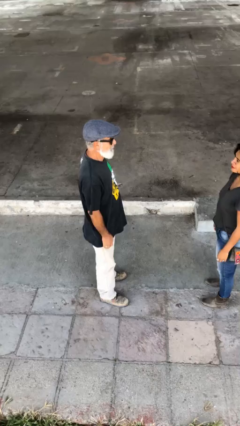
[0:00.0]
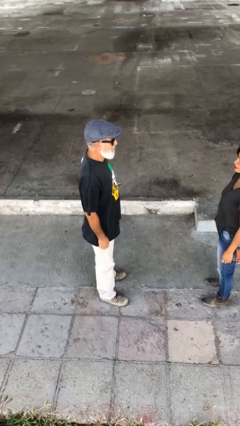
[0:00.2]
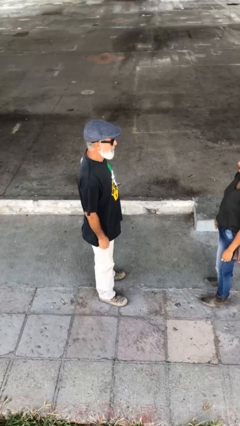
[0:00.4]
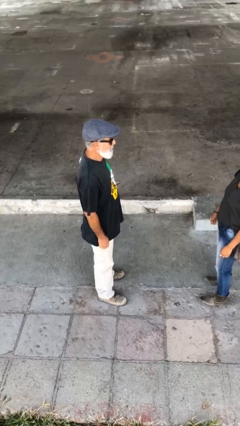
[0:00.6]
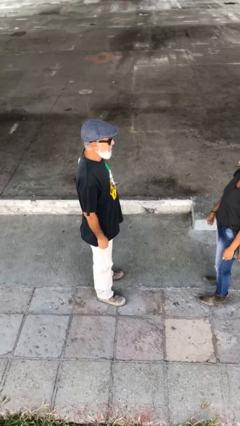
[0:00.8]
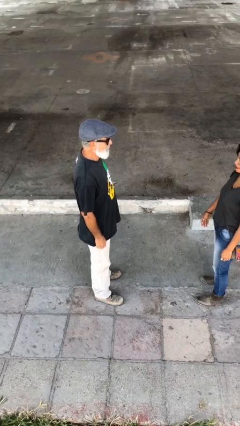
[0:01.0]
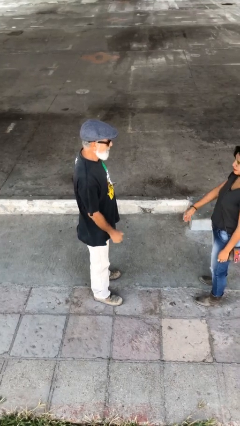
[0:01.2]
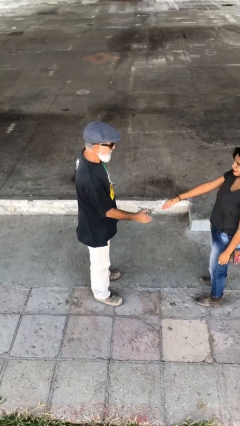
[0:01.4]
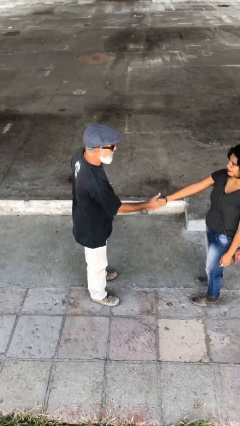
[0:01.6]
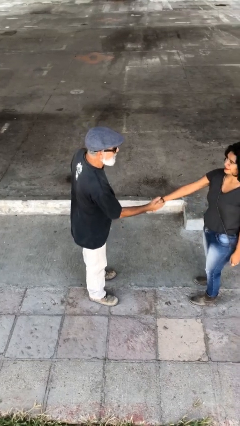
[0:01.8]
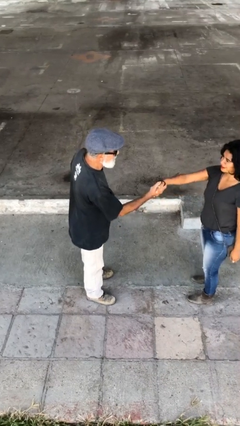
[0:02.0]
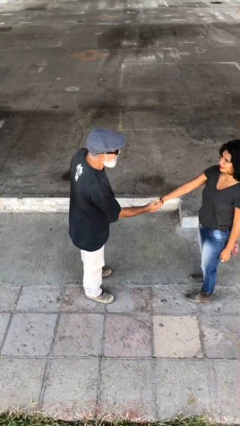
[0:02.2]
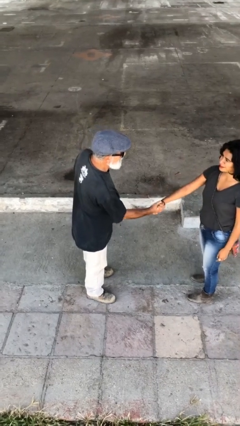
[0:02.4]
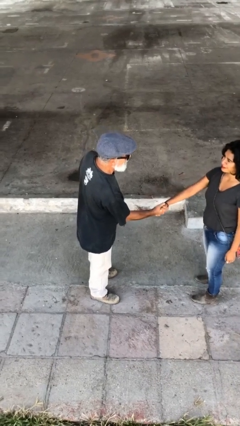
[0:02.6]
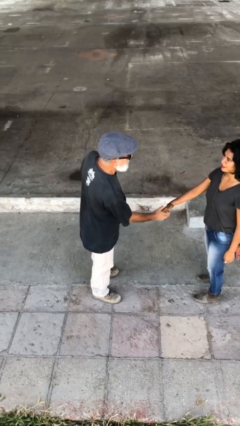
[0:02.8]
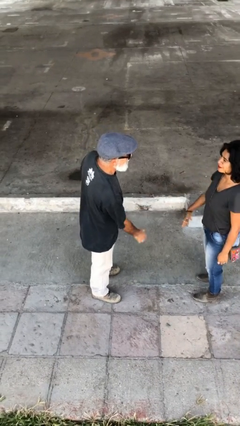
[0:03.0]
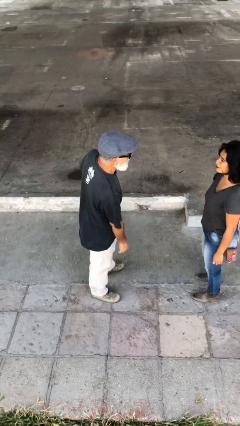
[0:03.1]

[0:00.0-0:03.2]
person shakes hand

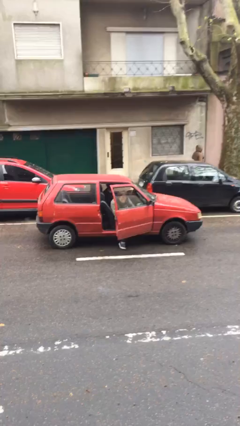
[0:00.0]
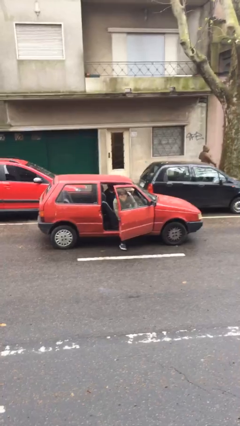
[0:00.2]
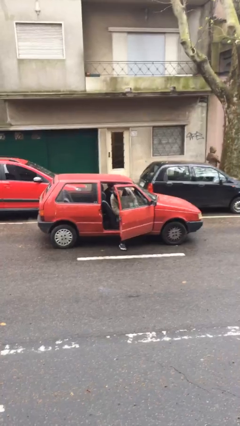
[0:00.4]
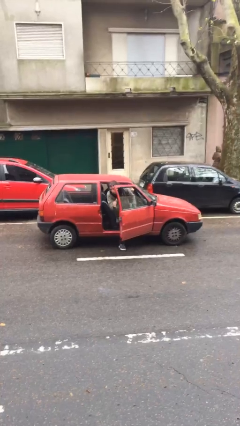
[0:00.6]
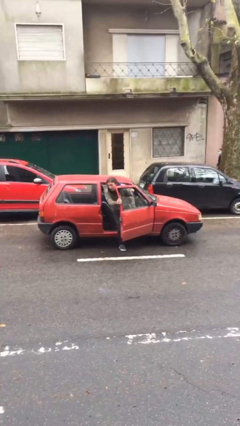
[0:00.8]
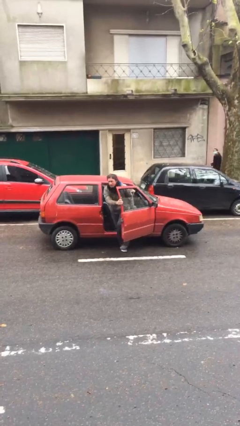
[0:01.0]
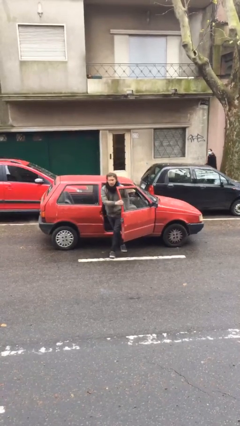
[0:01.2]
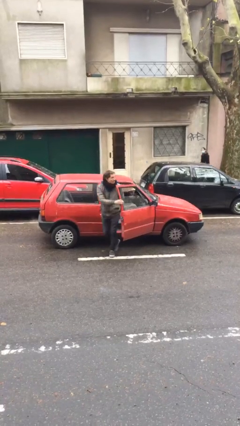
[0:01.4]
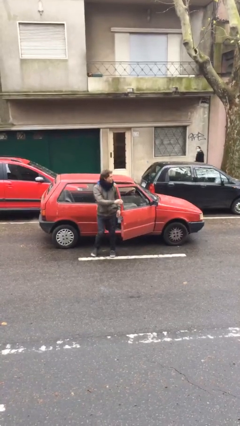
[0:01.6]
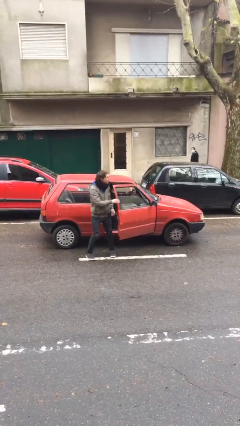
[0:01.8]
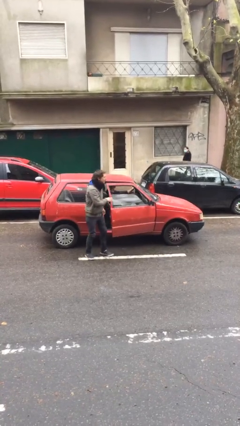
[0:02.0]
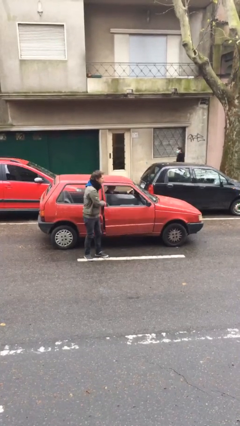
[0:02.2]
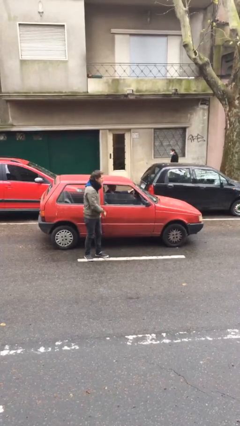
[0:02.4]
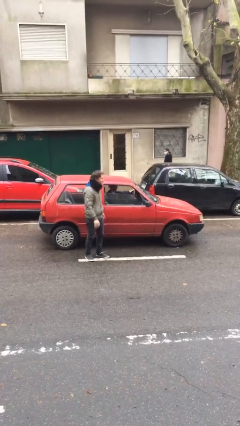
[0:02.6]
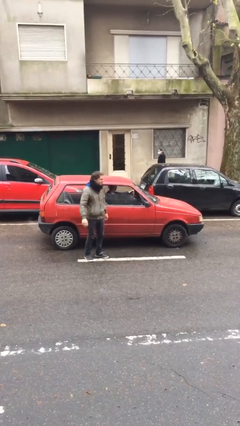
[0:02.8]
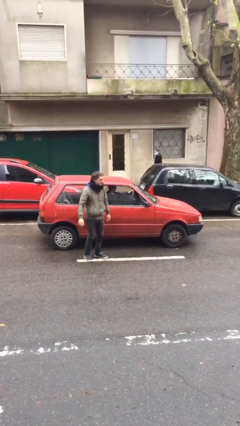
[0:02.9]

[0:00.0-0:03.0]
car drops off person

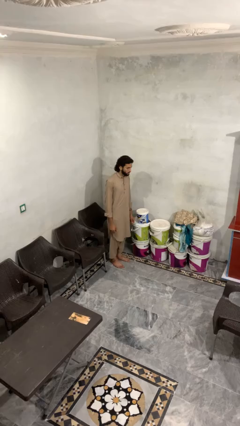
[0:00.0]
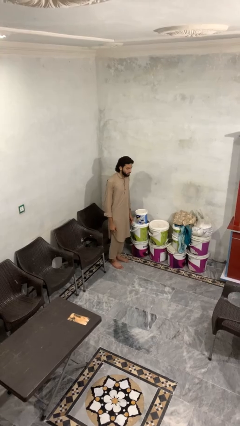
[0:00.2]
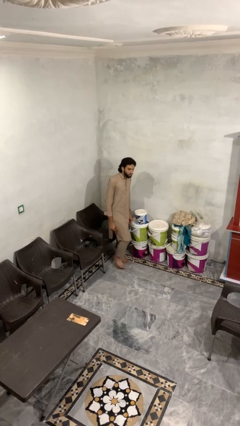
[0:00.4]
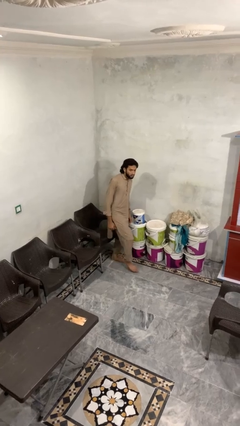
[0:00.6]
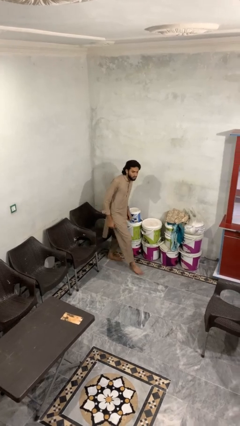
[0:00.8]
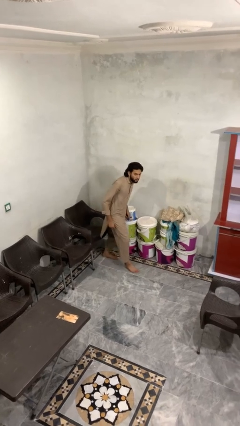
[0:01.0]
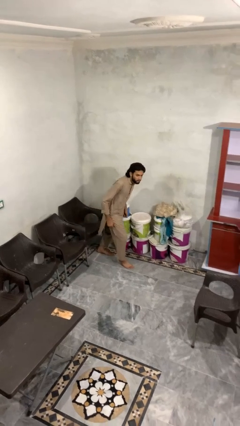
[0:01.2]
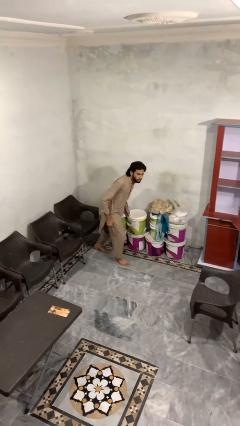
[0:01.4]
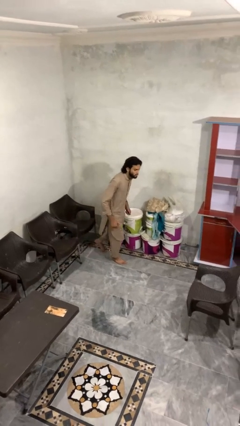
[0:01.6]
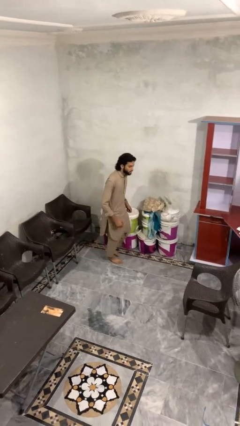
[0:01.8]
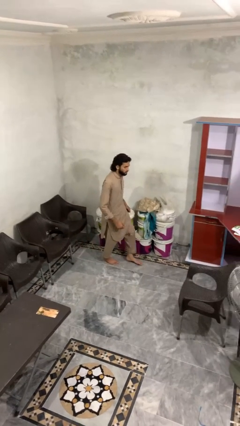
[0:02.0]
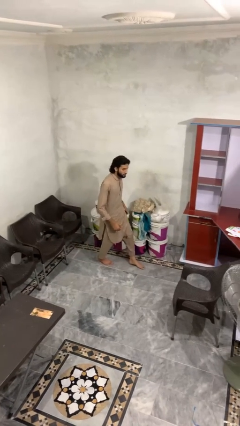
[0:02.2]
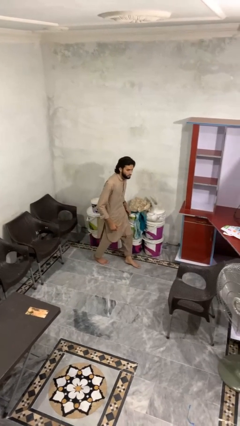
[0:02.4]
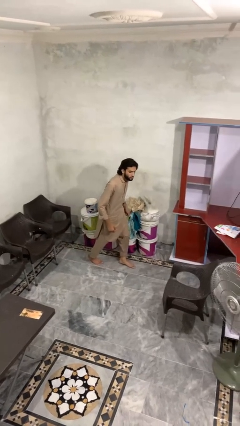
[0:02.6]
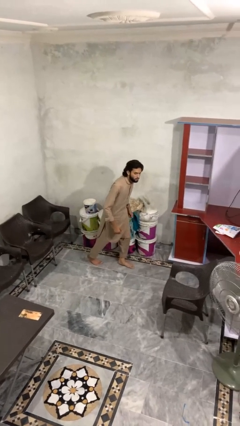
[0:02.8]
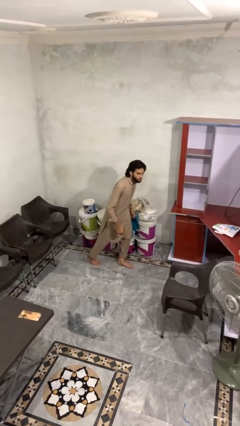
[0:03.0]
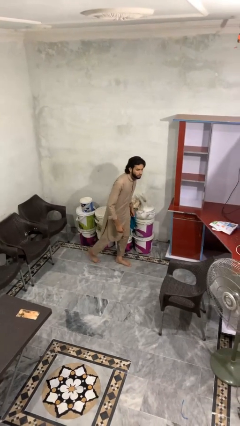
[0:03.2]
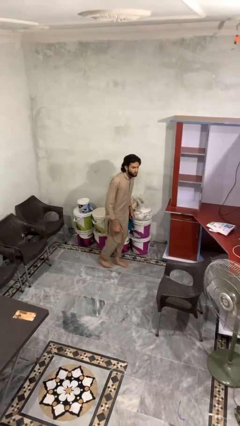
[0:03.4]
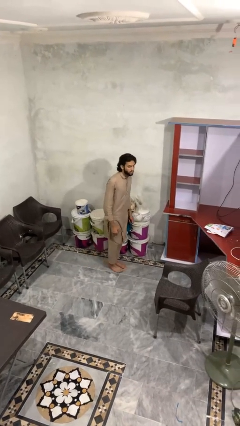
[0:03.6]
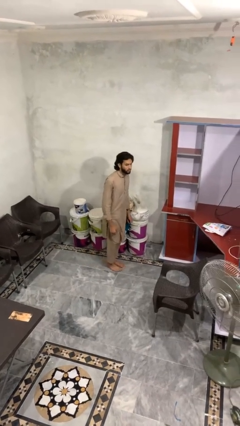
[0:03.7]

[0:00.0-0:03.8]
person walks tiptoe

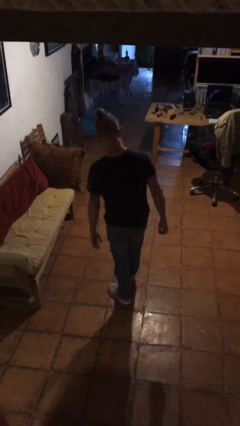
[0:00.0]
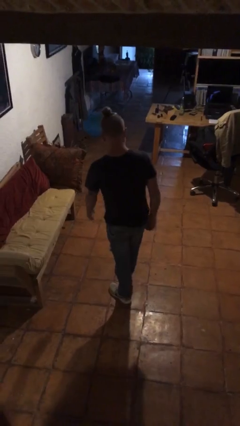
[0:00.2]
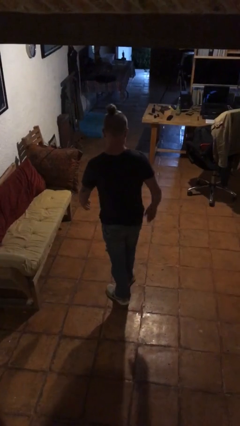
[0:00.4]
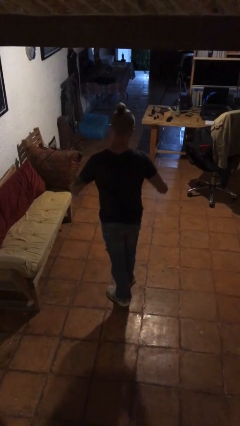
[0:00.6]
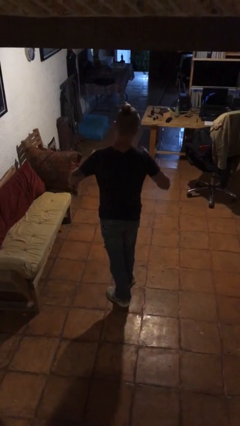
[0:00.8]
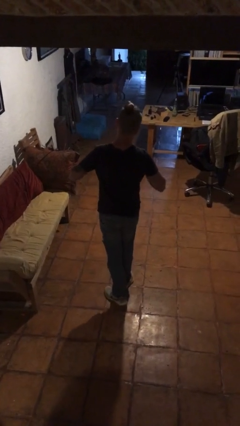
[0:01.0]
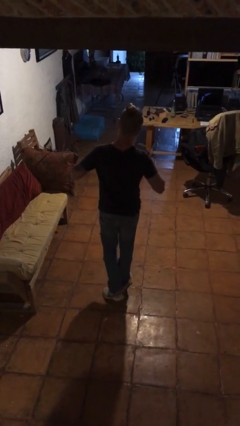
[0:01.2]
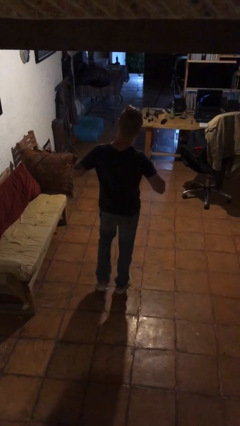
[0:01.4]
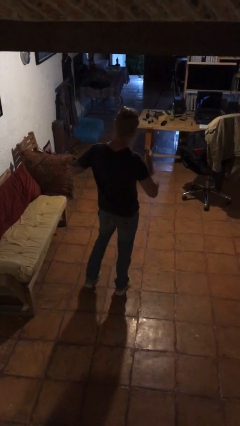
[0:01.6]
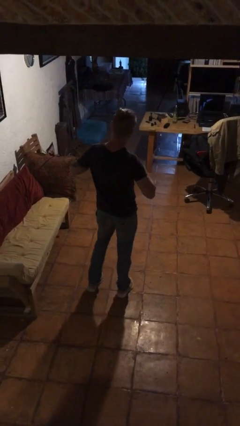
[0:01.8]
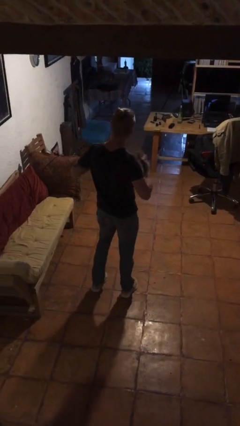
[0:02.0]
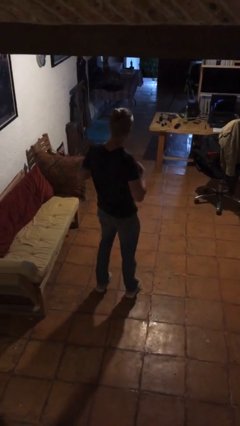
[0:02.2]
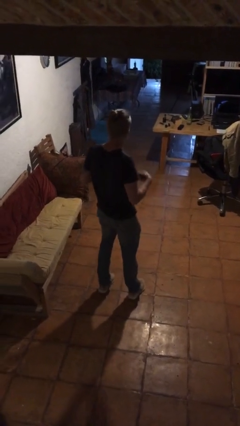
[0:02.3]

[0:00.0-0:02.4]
person drums on chest

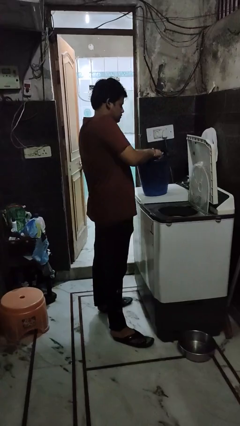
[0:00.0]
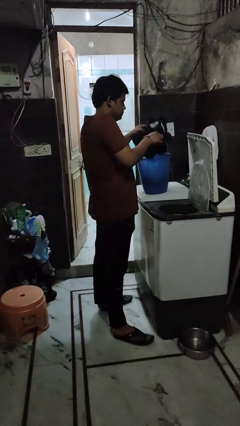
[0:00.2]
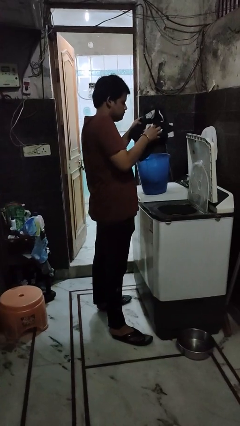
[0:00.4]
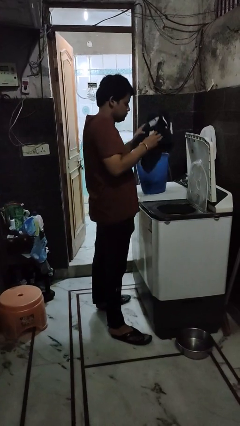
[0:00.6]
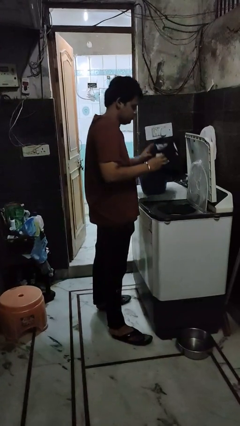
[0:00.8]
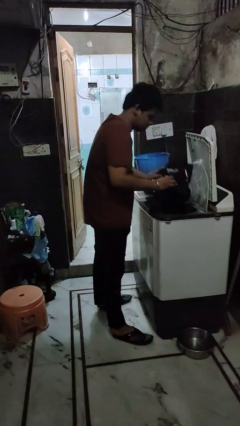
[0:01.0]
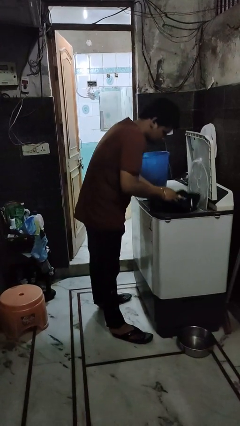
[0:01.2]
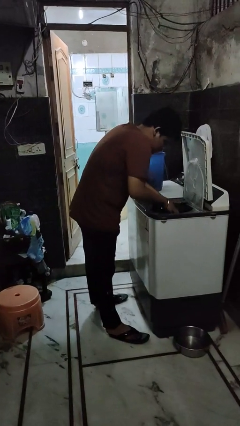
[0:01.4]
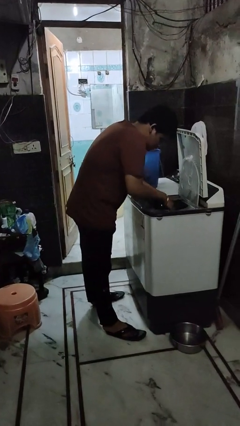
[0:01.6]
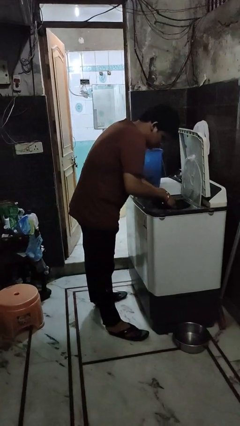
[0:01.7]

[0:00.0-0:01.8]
person loads dryer

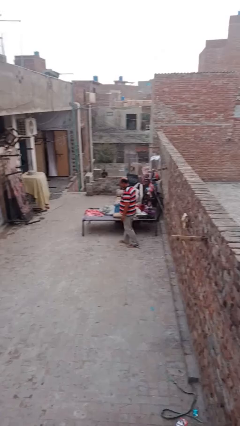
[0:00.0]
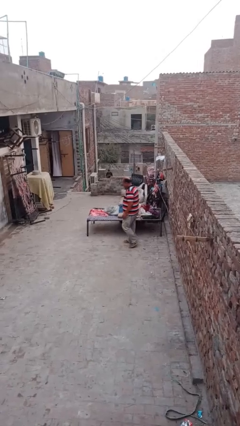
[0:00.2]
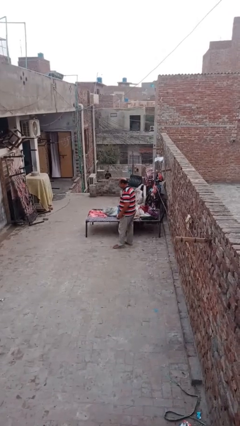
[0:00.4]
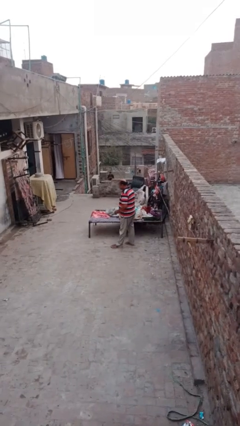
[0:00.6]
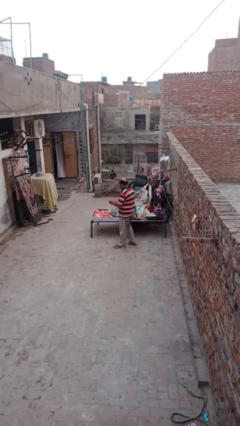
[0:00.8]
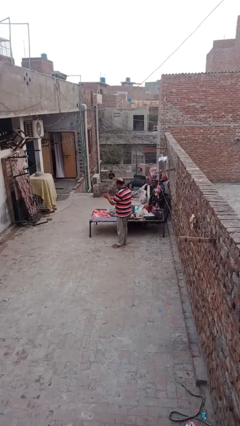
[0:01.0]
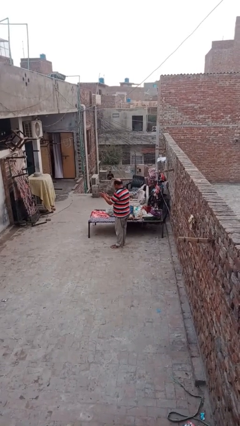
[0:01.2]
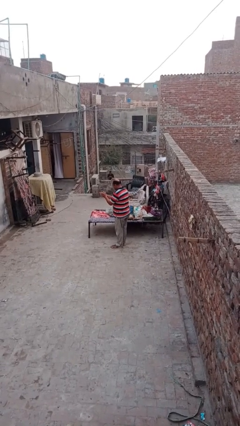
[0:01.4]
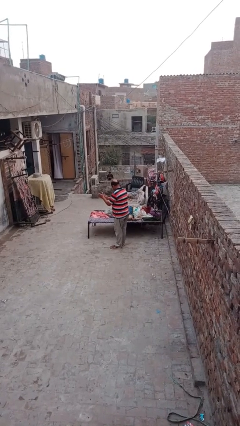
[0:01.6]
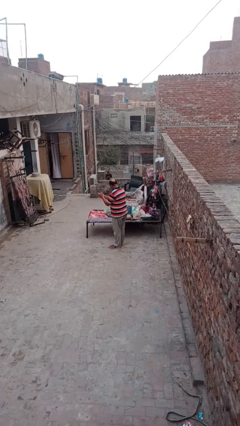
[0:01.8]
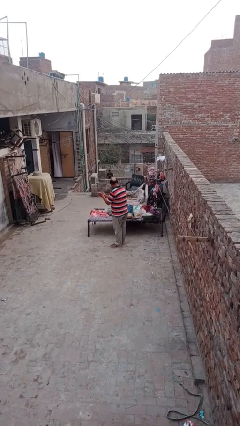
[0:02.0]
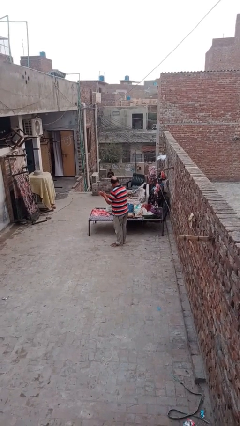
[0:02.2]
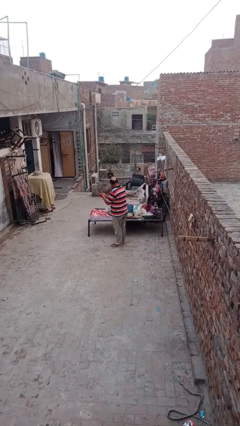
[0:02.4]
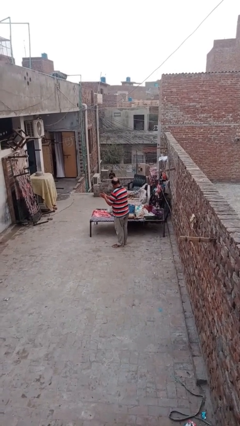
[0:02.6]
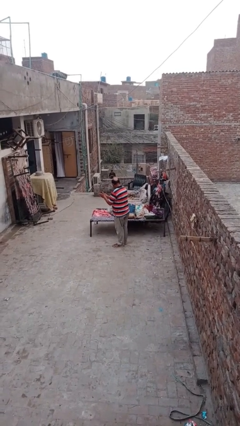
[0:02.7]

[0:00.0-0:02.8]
person blows into hands
